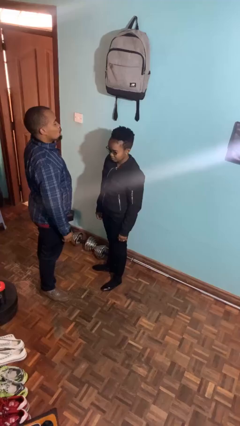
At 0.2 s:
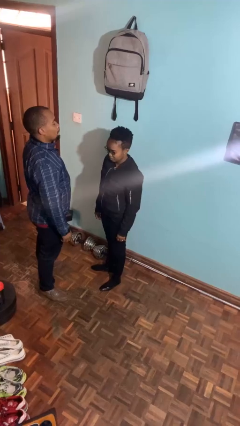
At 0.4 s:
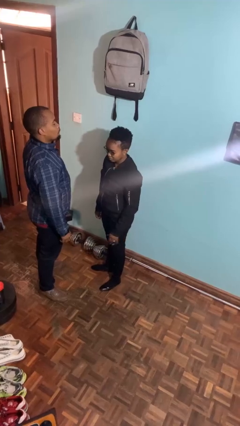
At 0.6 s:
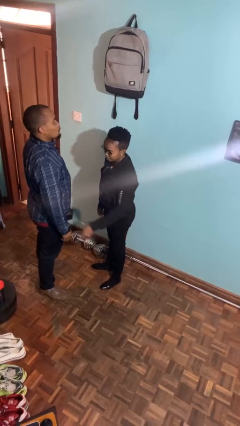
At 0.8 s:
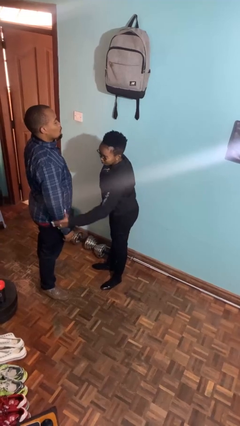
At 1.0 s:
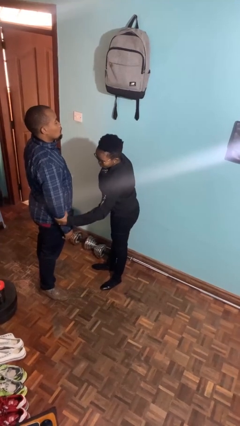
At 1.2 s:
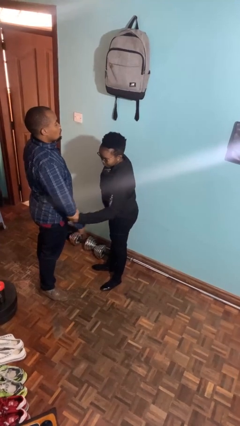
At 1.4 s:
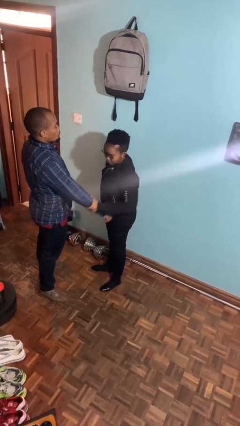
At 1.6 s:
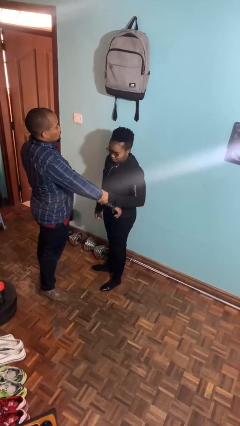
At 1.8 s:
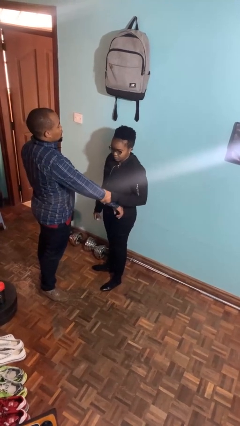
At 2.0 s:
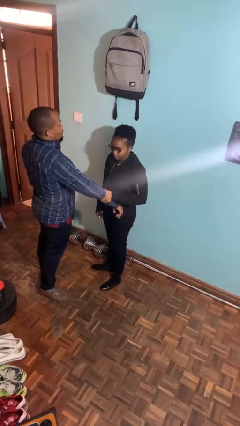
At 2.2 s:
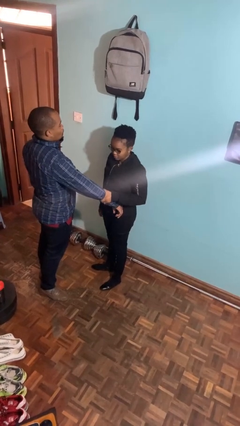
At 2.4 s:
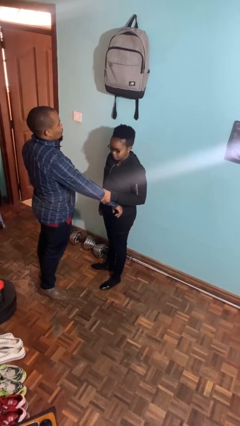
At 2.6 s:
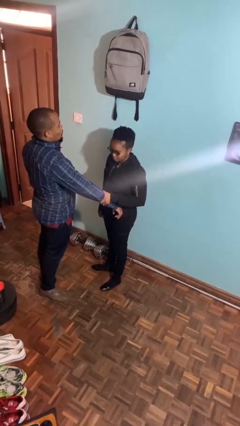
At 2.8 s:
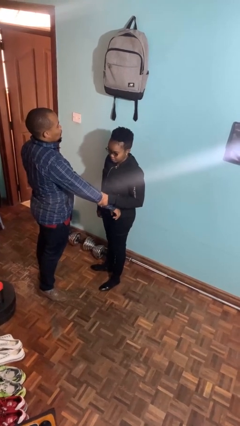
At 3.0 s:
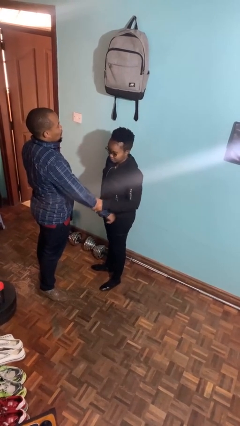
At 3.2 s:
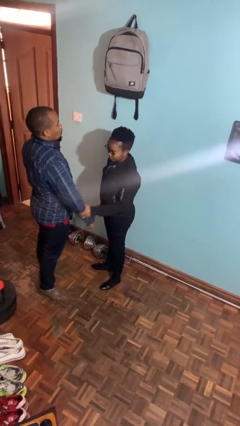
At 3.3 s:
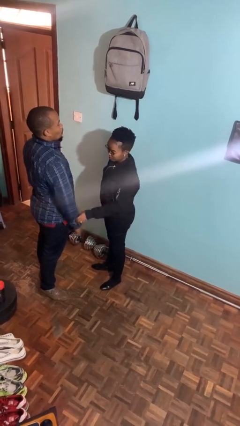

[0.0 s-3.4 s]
person grabs person by forearm

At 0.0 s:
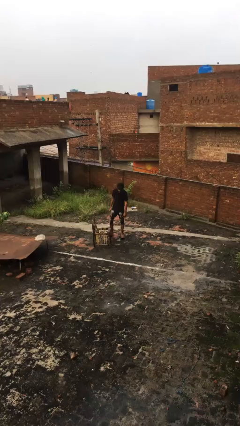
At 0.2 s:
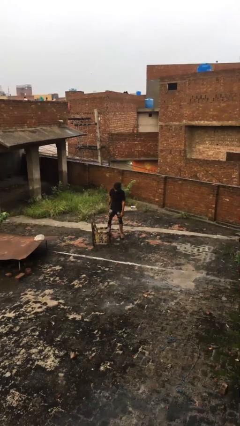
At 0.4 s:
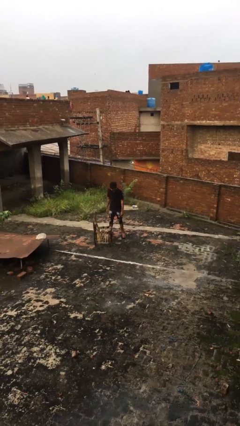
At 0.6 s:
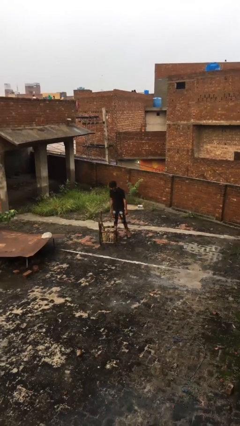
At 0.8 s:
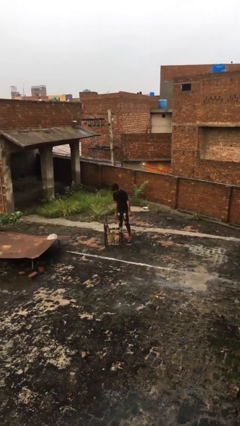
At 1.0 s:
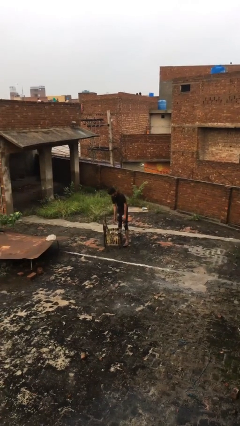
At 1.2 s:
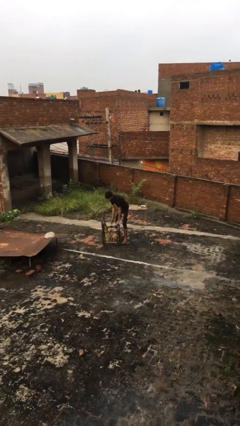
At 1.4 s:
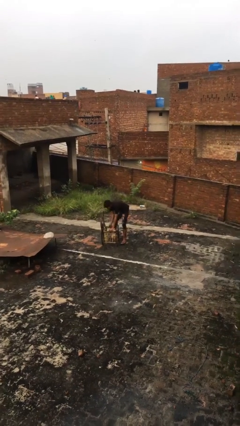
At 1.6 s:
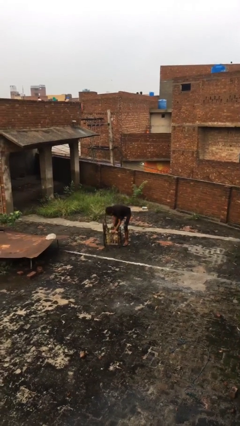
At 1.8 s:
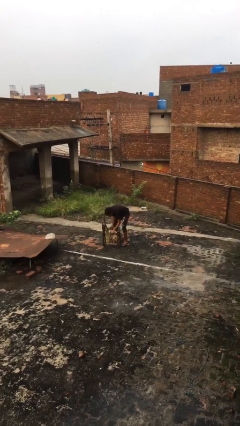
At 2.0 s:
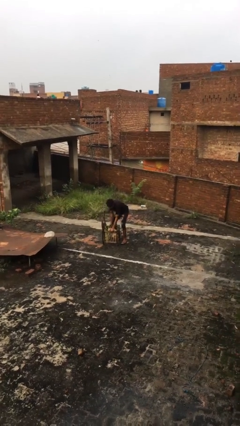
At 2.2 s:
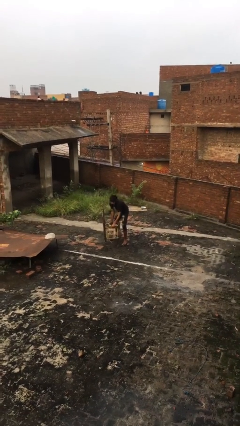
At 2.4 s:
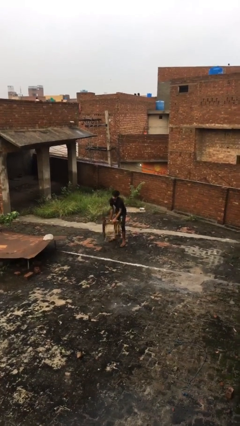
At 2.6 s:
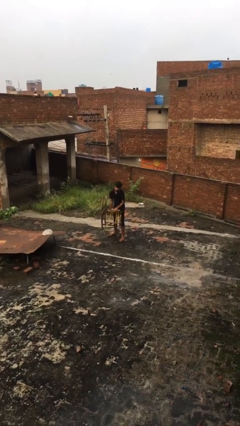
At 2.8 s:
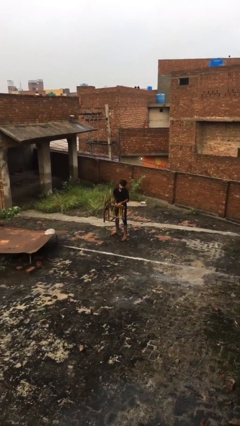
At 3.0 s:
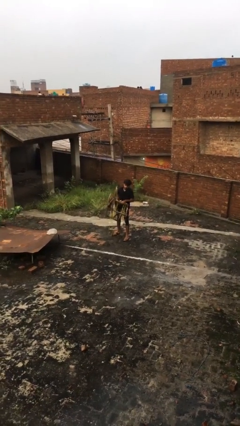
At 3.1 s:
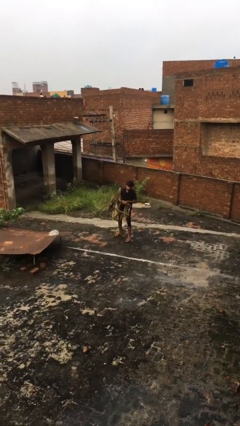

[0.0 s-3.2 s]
person picks up object from floor

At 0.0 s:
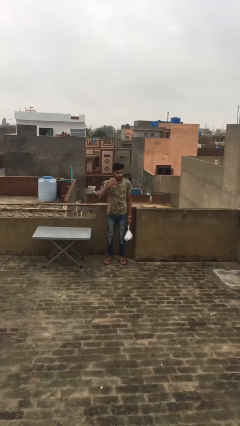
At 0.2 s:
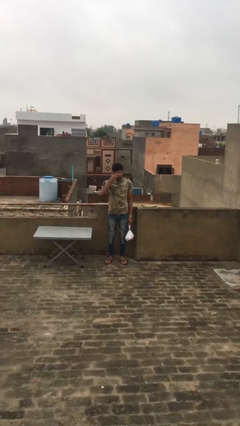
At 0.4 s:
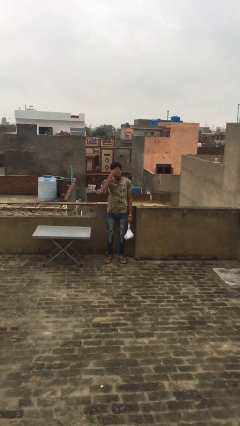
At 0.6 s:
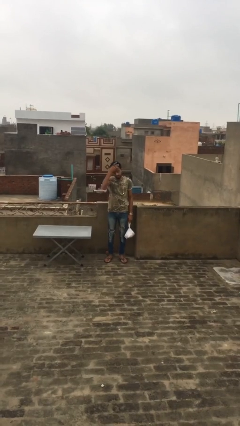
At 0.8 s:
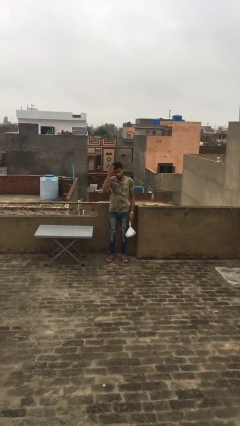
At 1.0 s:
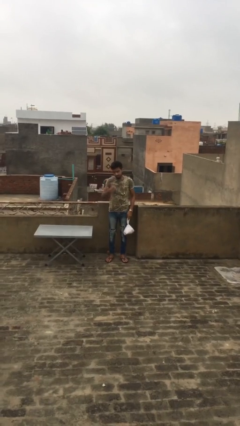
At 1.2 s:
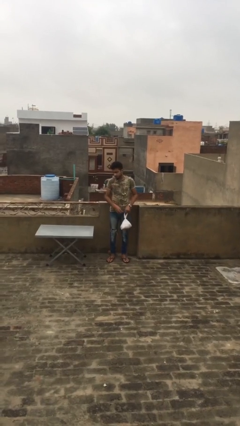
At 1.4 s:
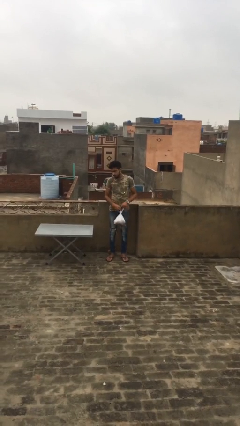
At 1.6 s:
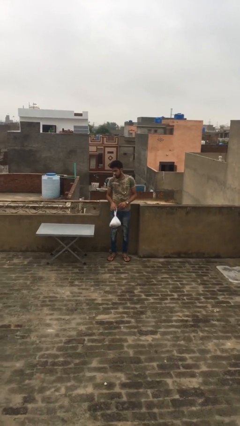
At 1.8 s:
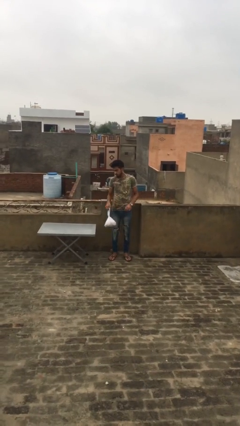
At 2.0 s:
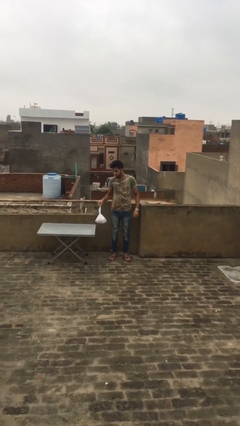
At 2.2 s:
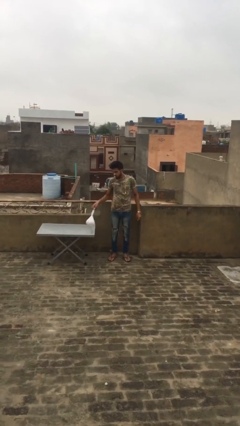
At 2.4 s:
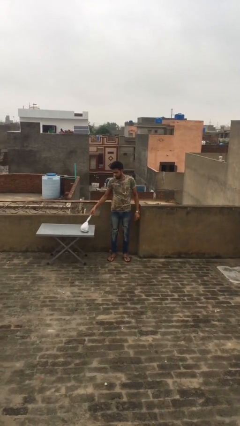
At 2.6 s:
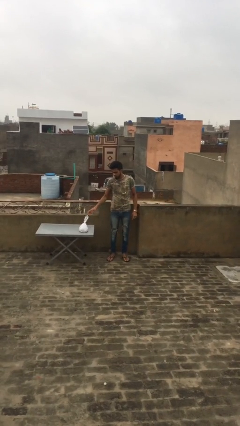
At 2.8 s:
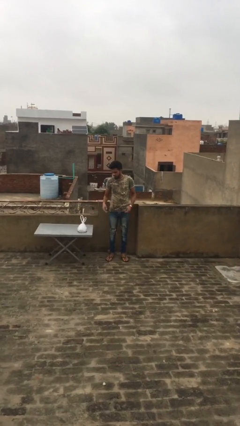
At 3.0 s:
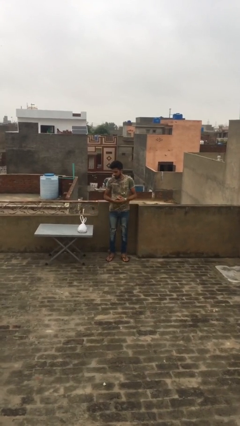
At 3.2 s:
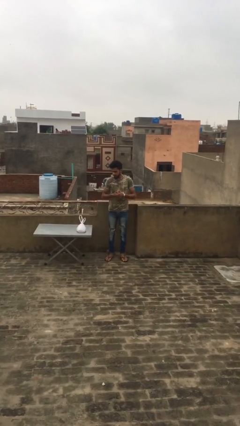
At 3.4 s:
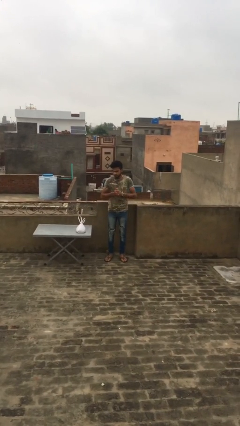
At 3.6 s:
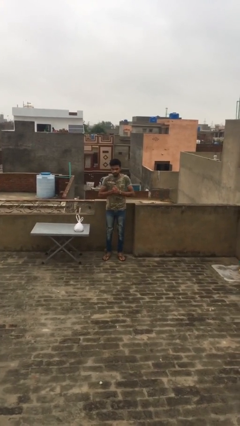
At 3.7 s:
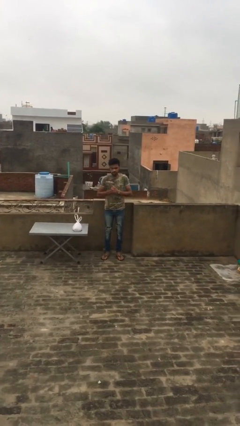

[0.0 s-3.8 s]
person puts down object on table

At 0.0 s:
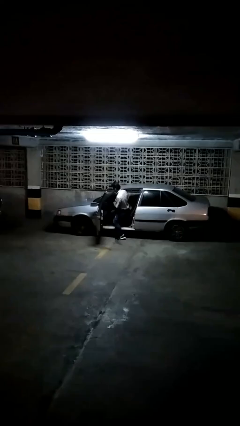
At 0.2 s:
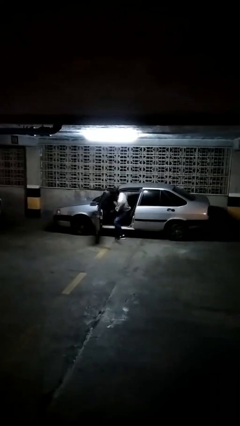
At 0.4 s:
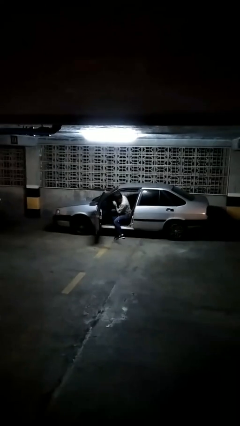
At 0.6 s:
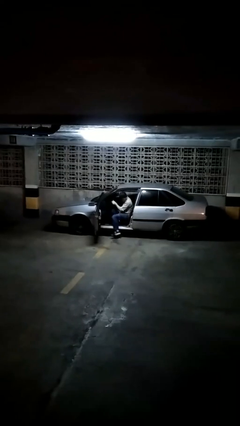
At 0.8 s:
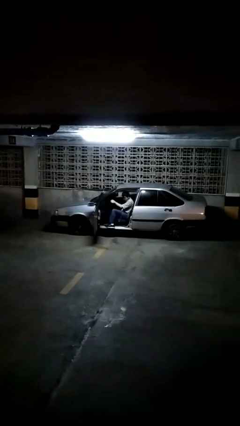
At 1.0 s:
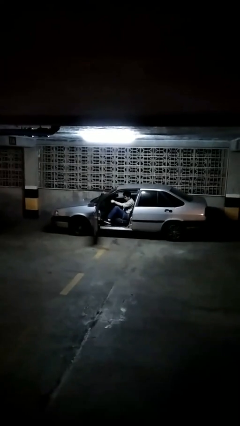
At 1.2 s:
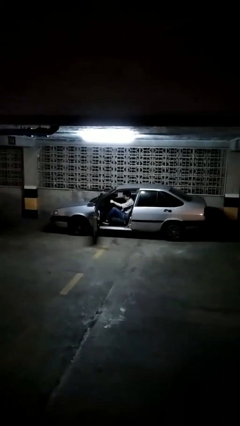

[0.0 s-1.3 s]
person enters car

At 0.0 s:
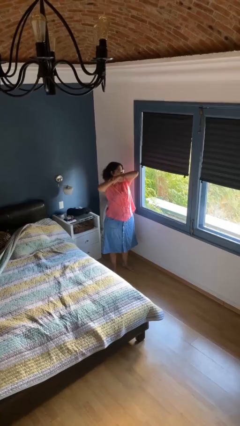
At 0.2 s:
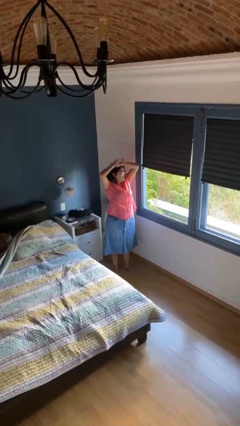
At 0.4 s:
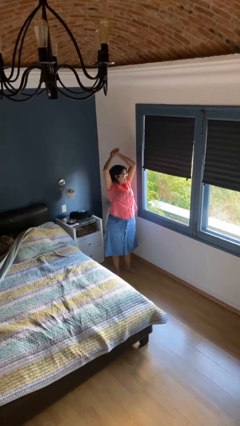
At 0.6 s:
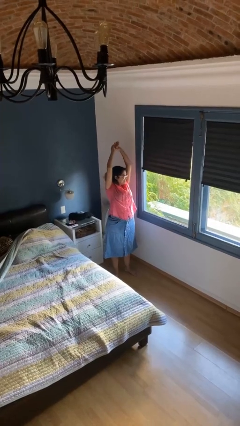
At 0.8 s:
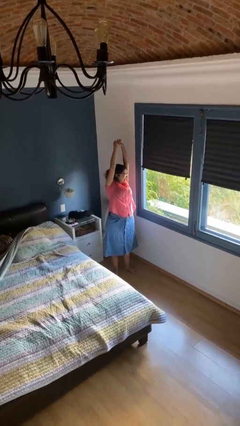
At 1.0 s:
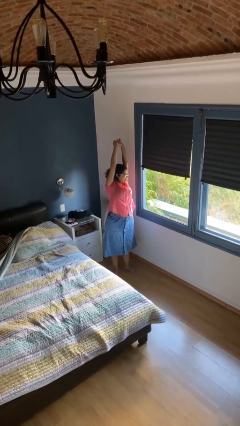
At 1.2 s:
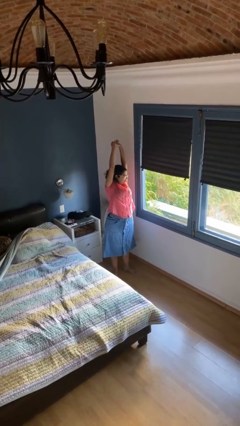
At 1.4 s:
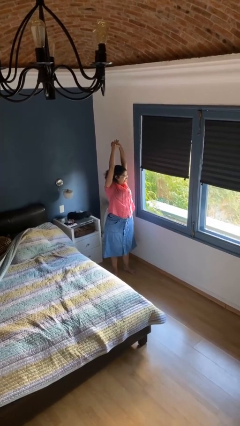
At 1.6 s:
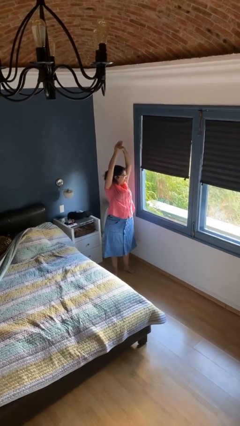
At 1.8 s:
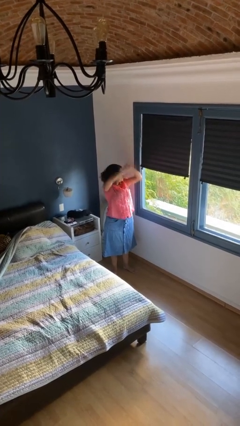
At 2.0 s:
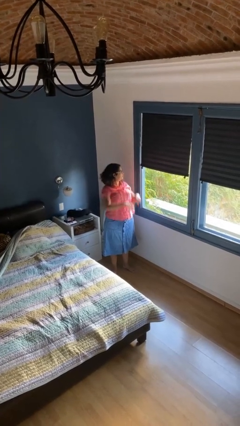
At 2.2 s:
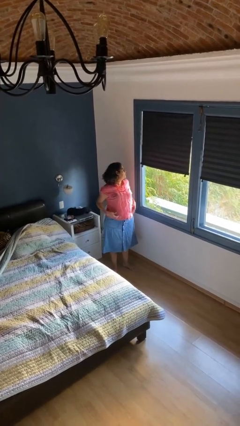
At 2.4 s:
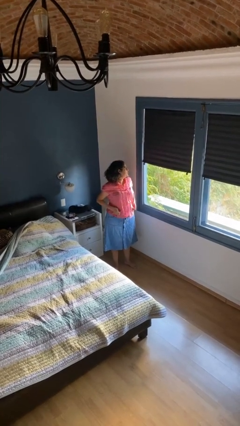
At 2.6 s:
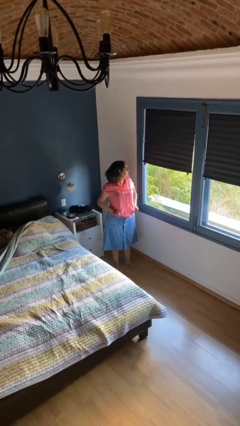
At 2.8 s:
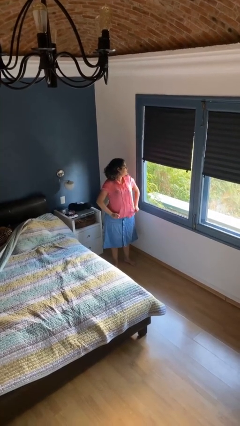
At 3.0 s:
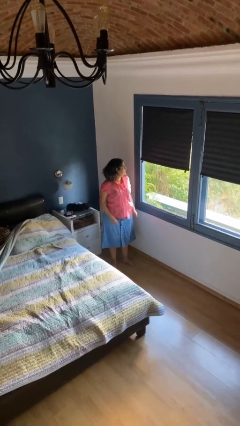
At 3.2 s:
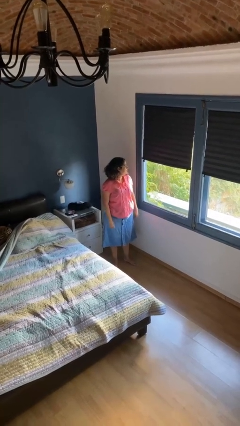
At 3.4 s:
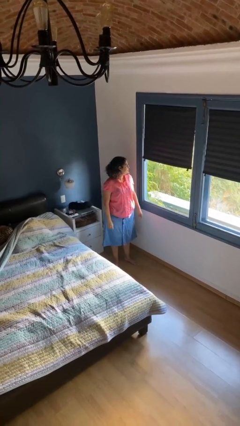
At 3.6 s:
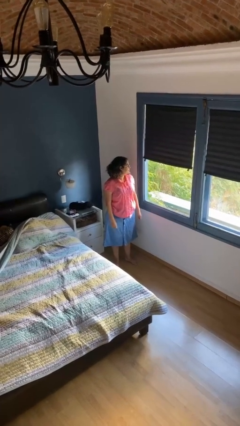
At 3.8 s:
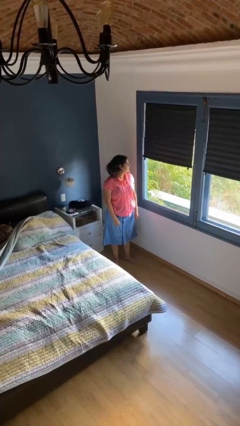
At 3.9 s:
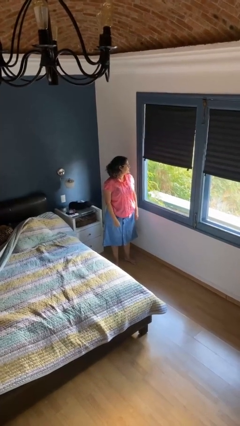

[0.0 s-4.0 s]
person stretches arms over head

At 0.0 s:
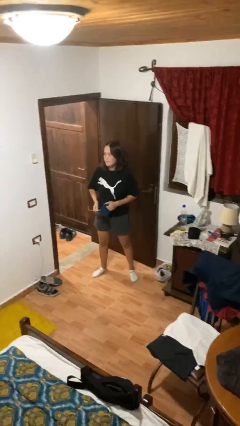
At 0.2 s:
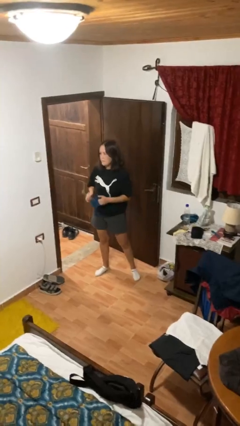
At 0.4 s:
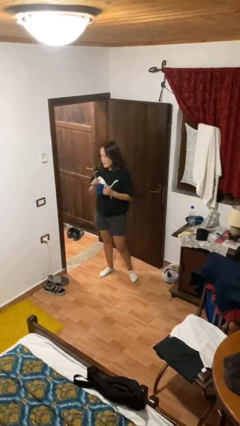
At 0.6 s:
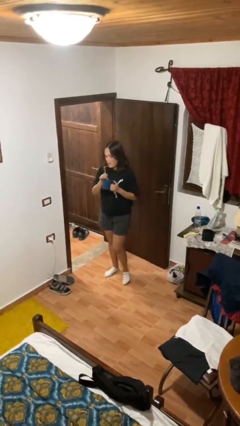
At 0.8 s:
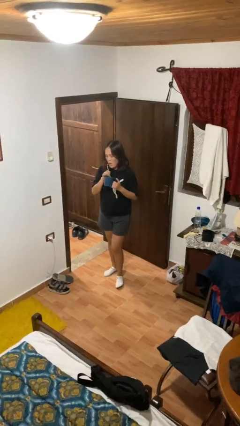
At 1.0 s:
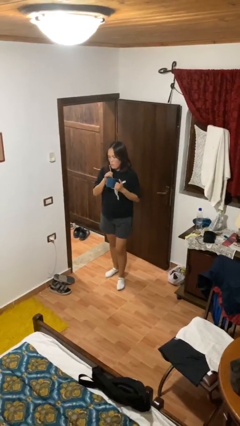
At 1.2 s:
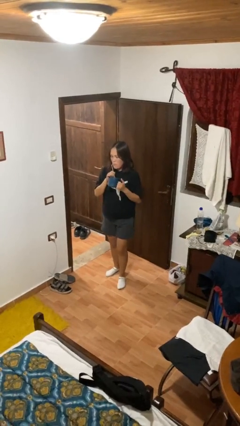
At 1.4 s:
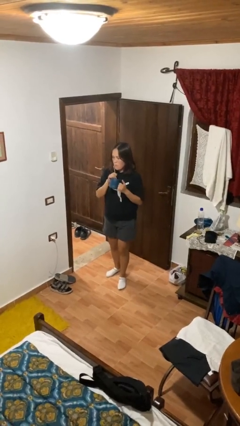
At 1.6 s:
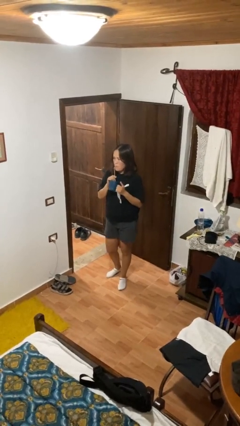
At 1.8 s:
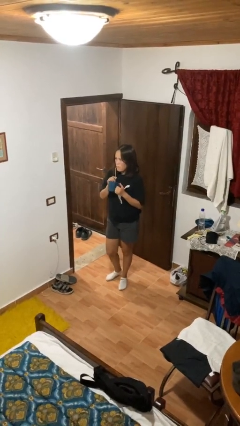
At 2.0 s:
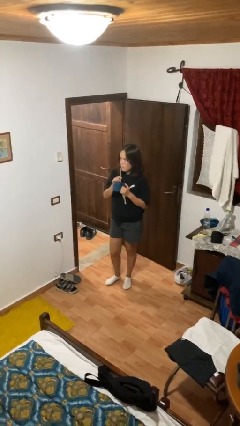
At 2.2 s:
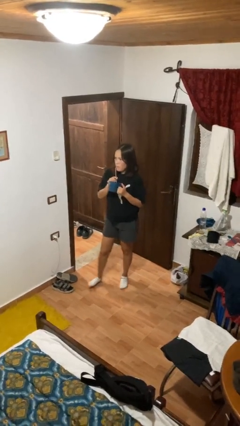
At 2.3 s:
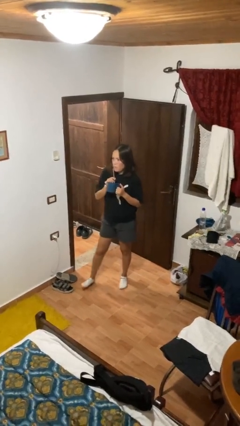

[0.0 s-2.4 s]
person drinks from straw
